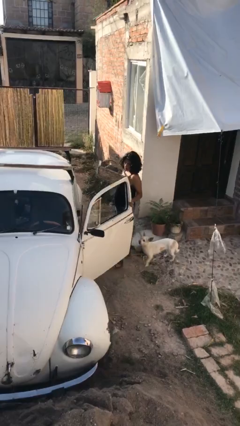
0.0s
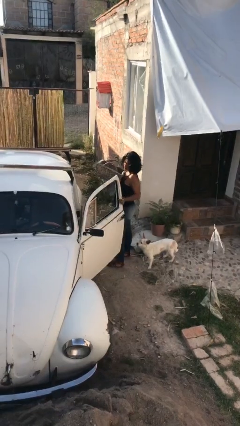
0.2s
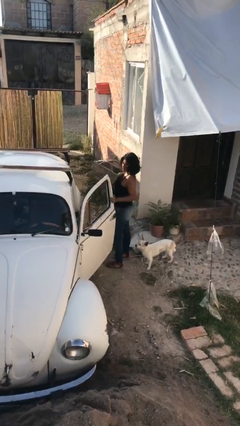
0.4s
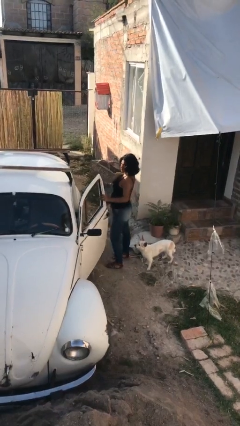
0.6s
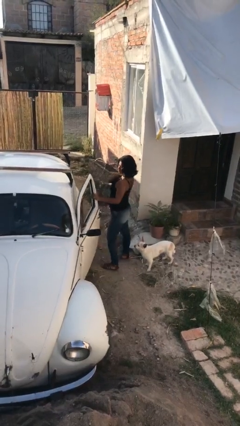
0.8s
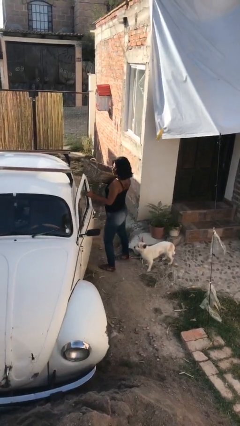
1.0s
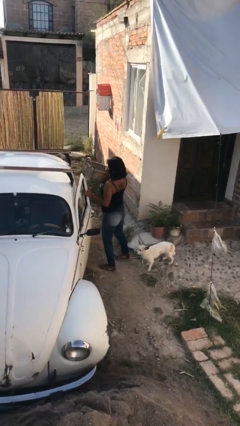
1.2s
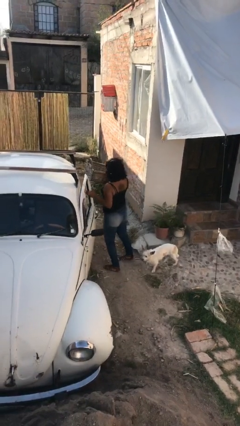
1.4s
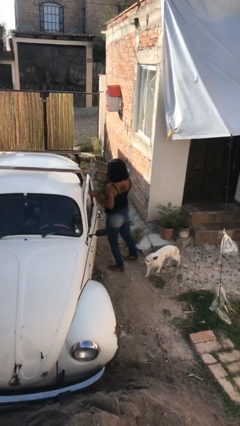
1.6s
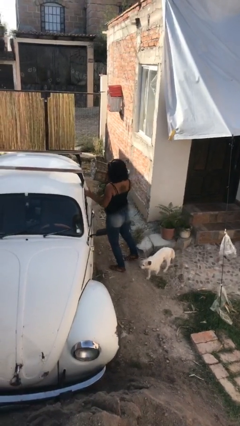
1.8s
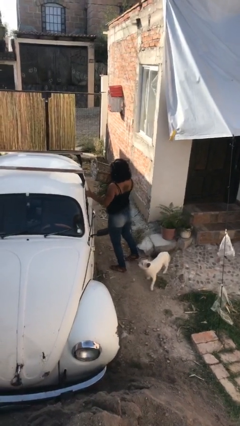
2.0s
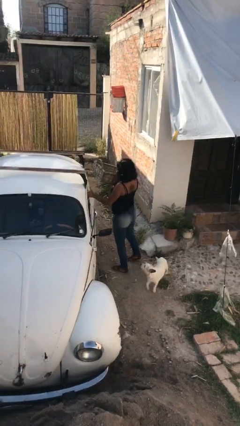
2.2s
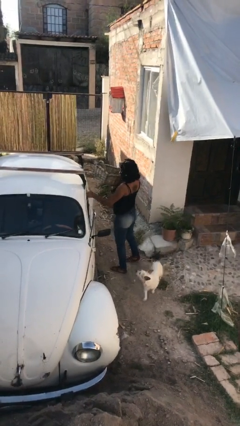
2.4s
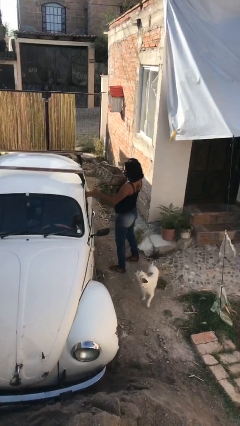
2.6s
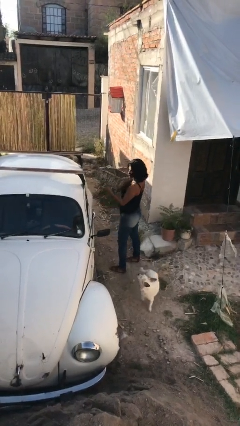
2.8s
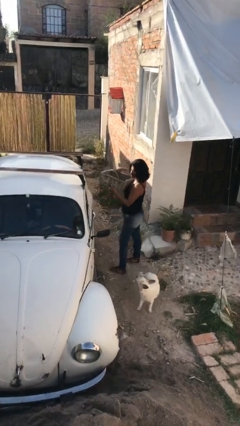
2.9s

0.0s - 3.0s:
person closes car door

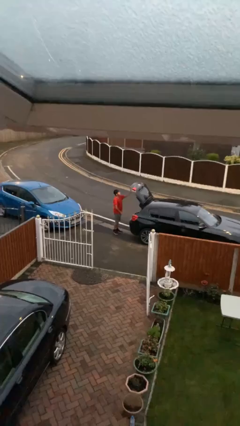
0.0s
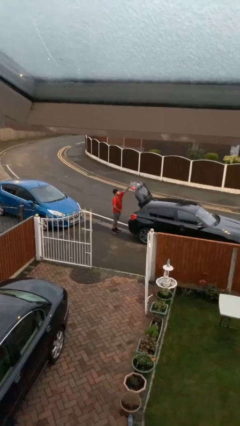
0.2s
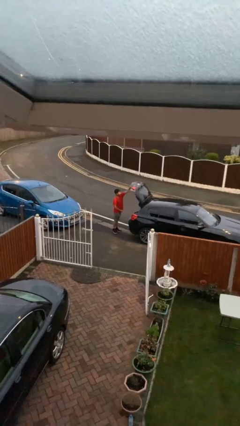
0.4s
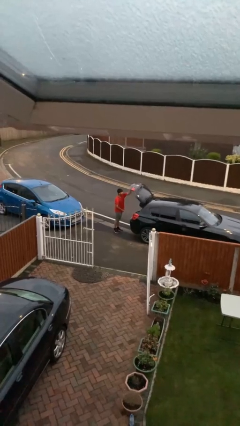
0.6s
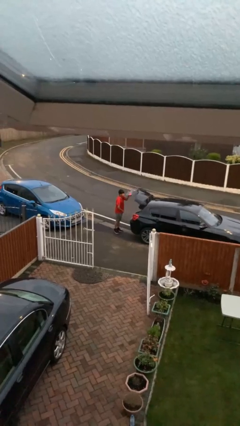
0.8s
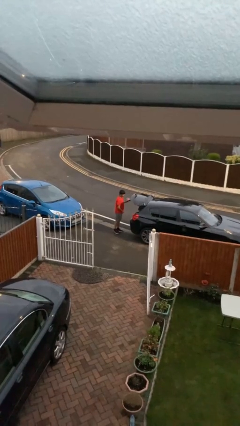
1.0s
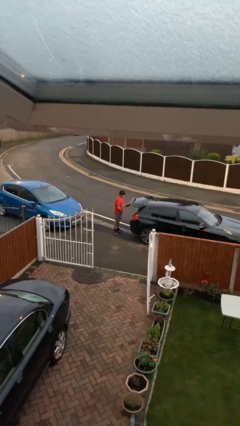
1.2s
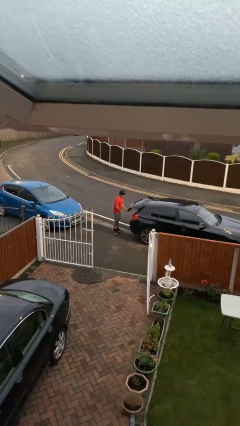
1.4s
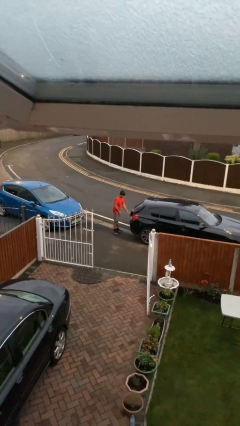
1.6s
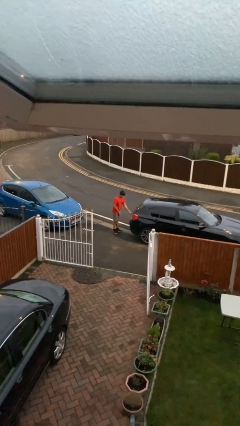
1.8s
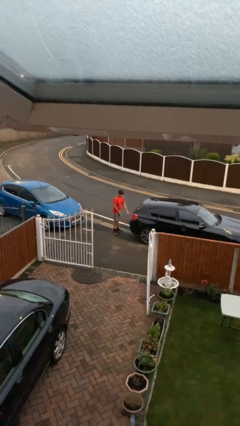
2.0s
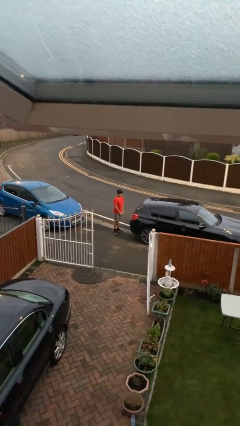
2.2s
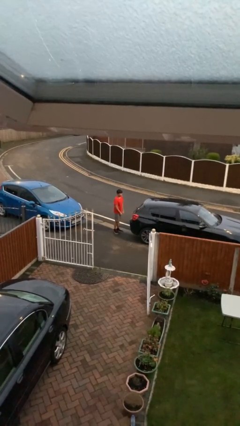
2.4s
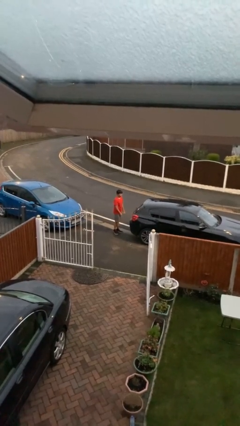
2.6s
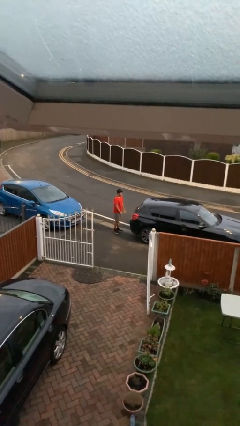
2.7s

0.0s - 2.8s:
person closes car trunk

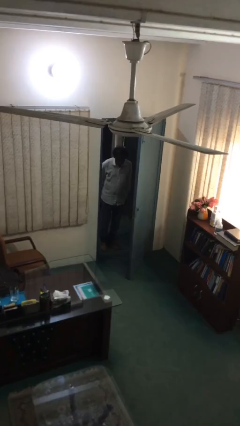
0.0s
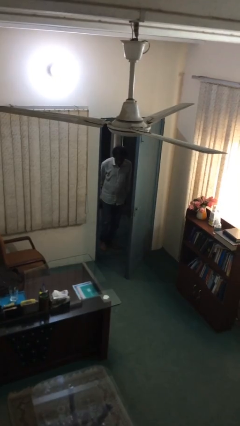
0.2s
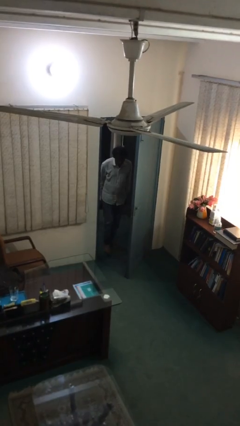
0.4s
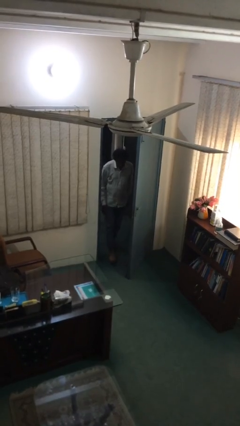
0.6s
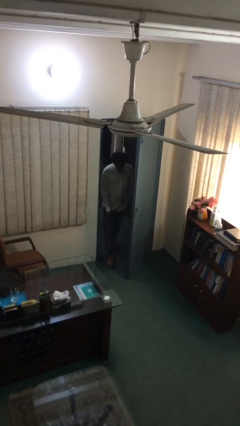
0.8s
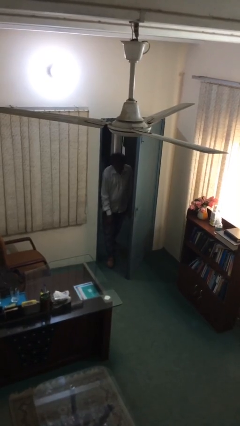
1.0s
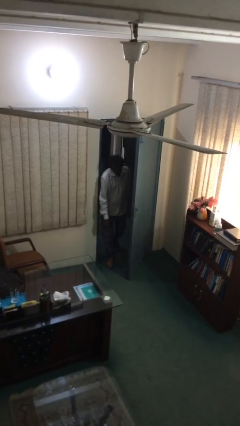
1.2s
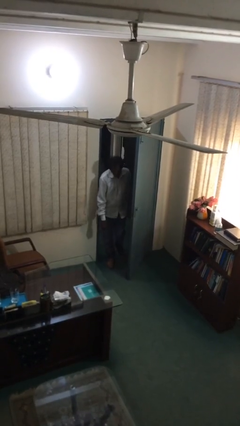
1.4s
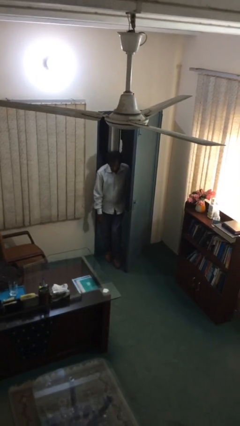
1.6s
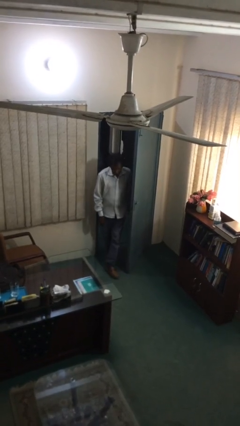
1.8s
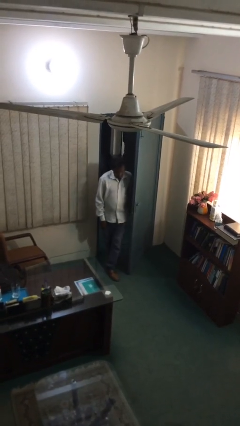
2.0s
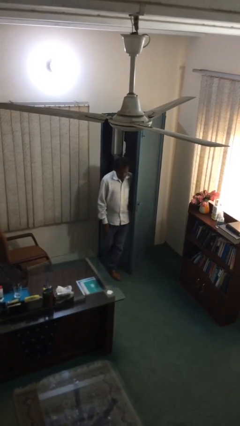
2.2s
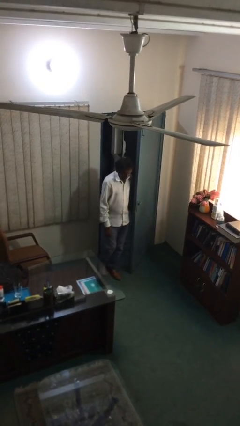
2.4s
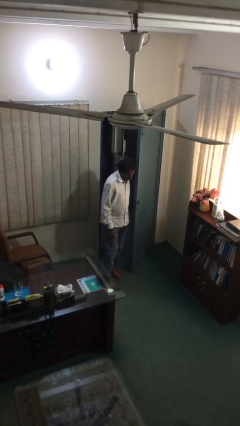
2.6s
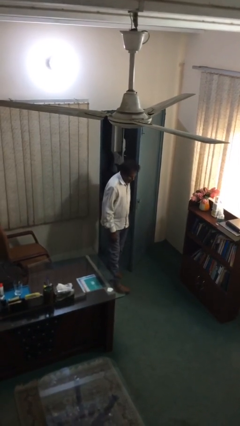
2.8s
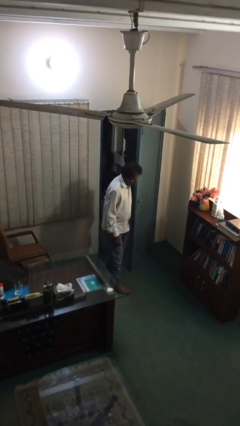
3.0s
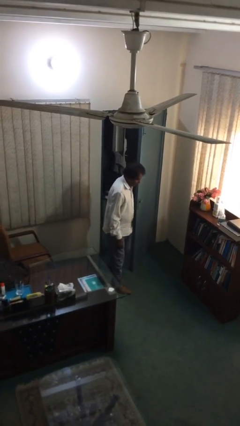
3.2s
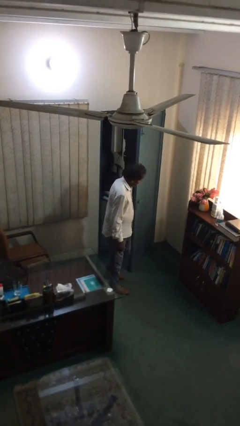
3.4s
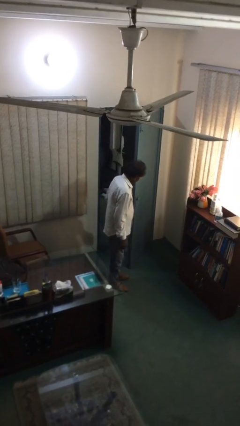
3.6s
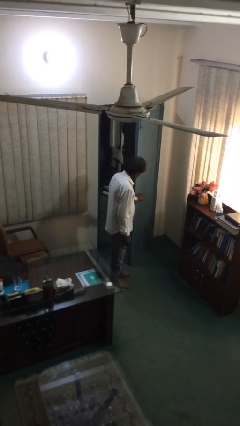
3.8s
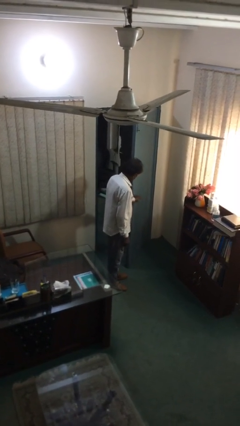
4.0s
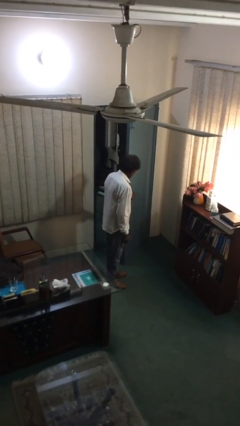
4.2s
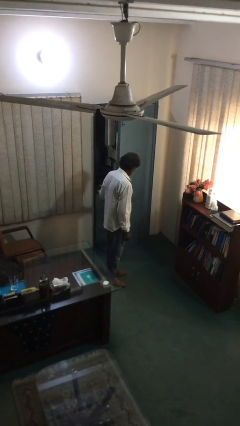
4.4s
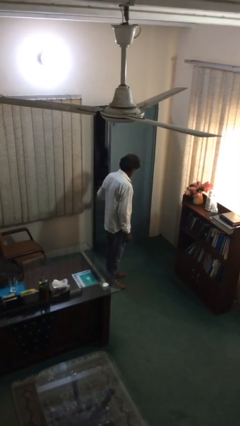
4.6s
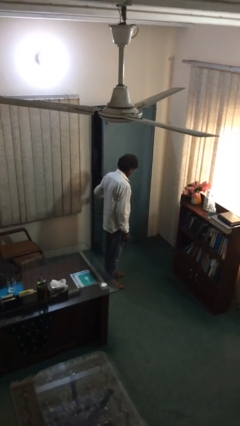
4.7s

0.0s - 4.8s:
person enters scene through structure

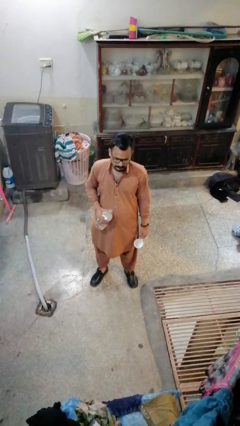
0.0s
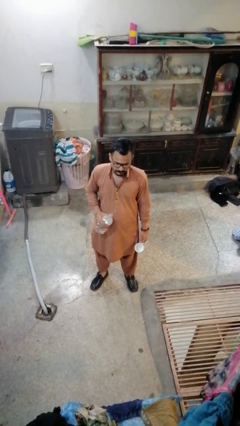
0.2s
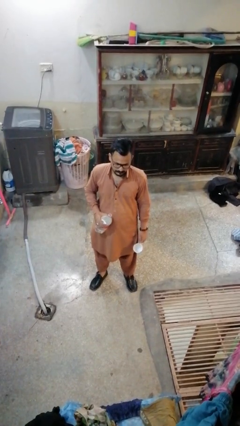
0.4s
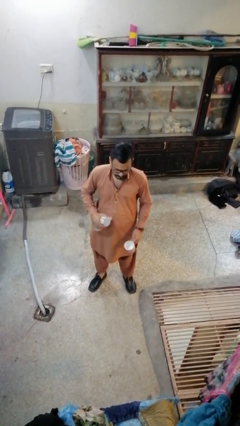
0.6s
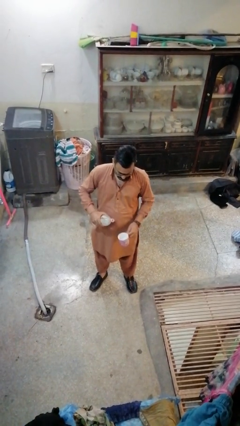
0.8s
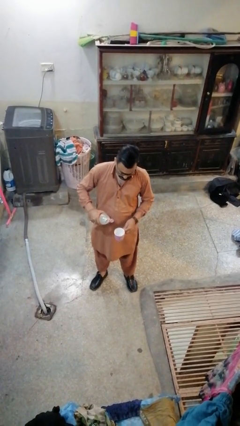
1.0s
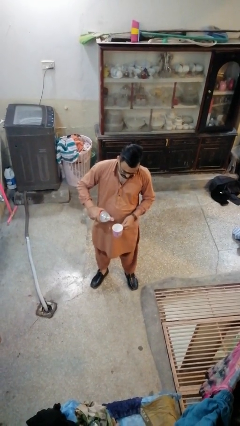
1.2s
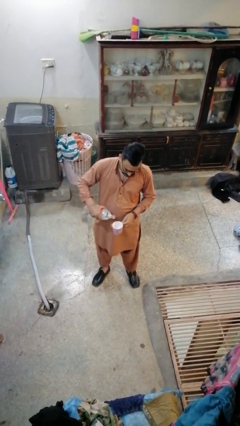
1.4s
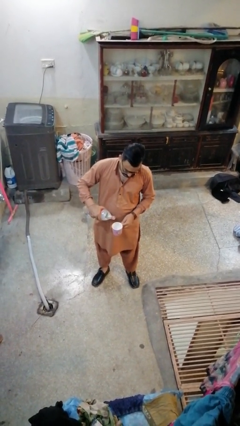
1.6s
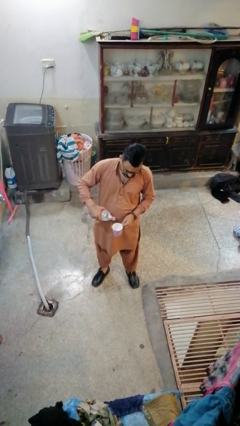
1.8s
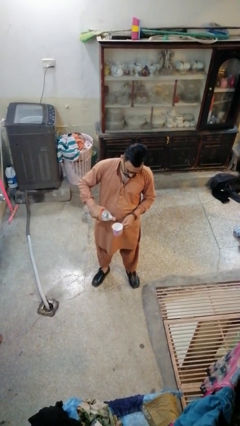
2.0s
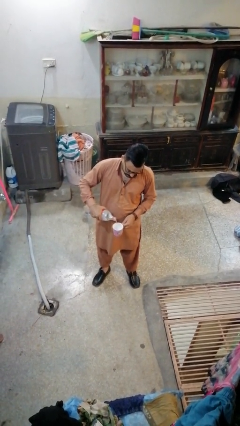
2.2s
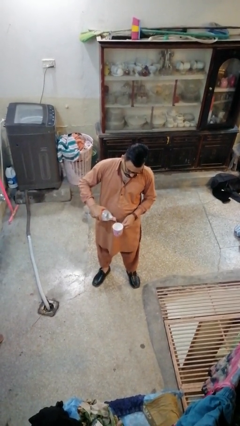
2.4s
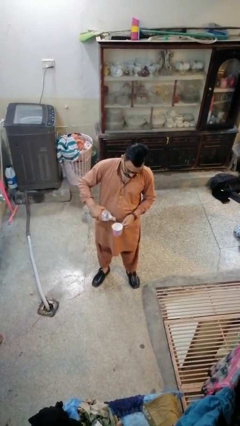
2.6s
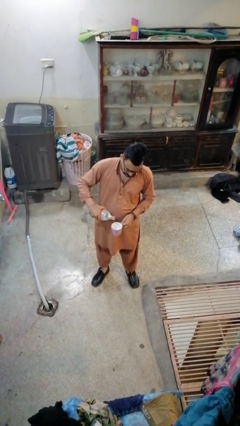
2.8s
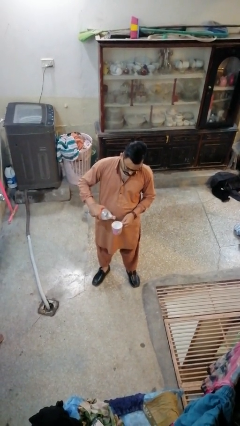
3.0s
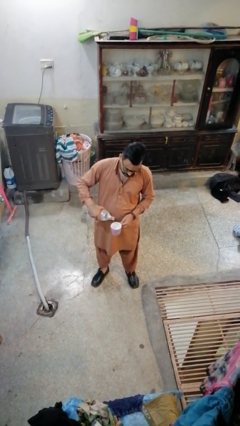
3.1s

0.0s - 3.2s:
person pours liquid into cup

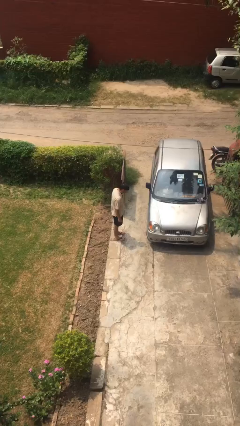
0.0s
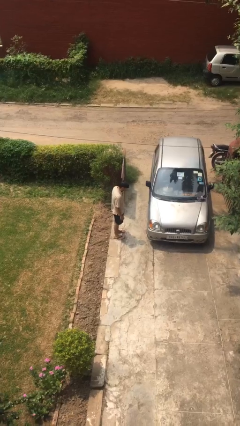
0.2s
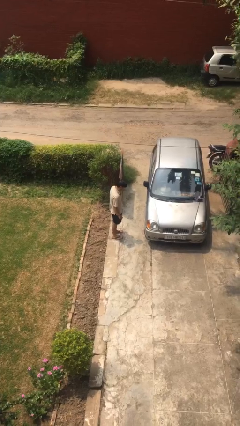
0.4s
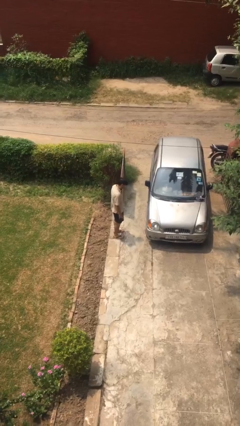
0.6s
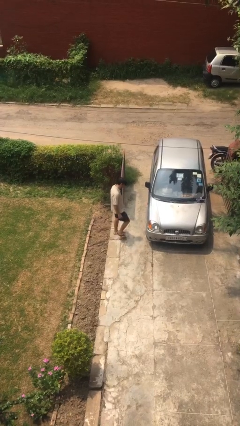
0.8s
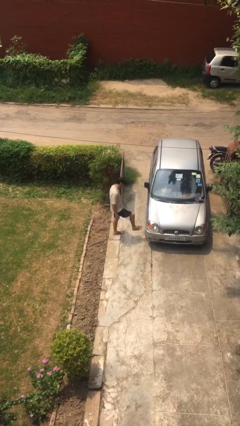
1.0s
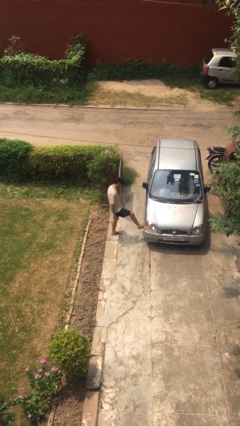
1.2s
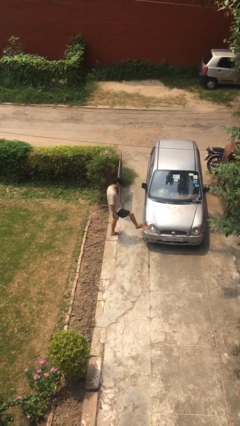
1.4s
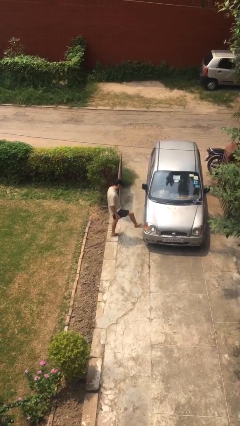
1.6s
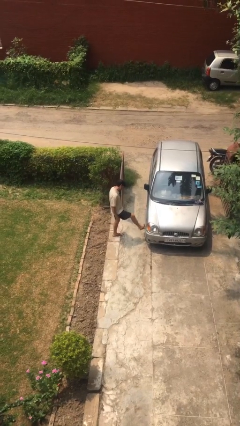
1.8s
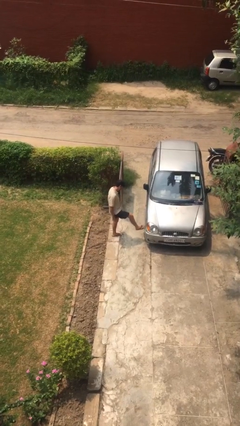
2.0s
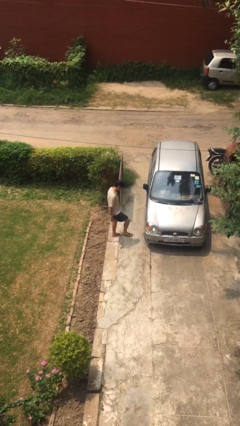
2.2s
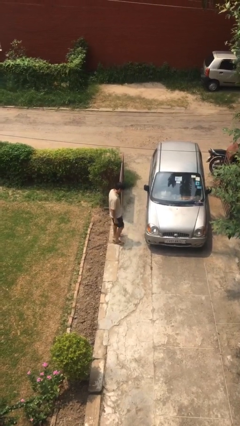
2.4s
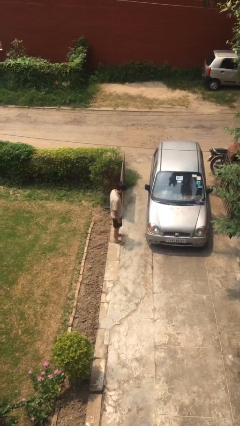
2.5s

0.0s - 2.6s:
person kicks car tires

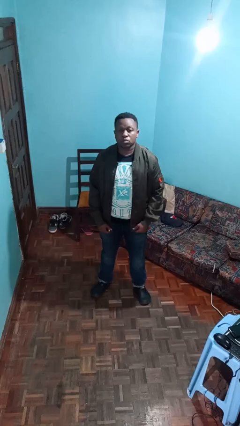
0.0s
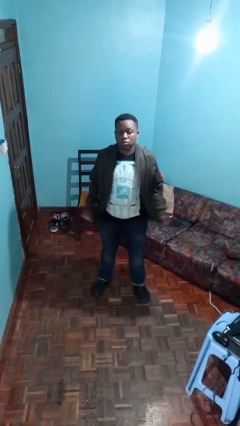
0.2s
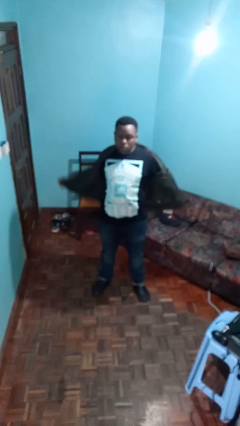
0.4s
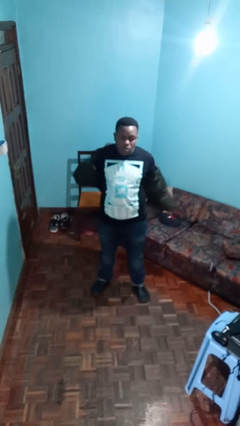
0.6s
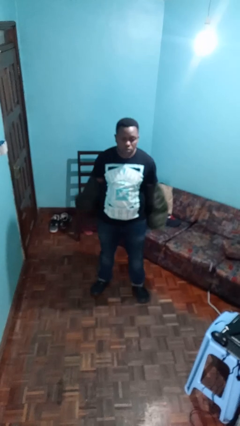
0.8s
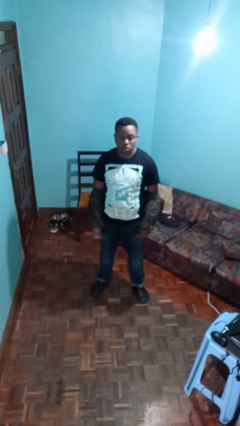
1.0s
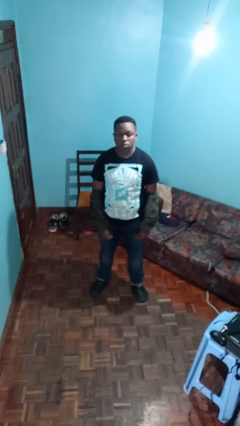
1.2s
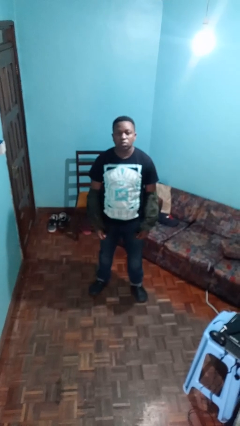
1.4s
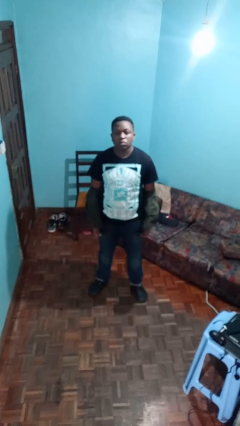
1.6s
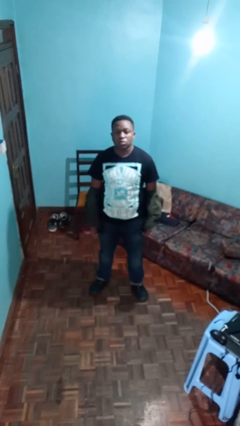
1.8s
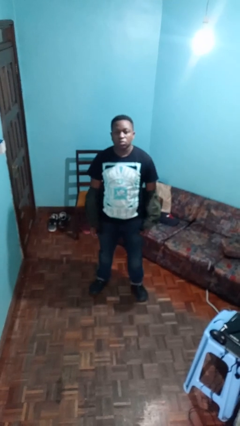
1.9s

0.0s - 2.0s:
person takes off jacket
